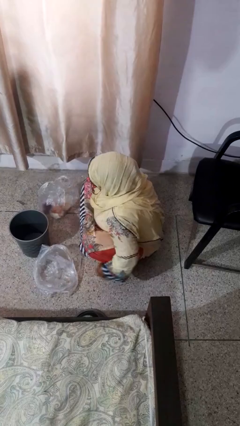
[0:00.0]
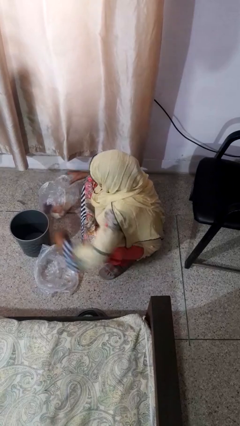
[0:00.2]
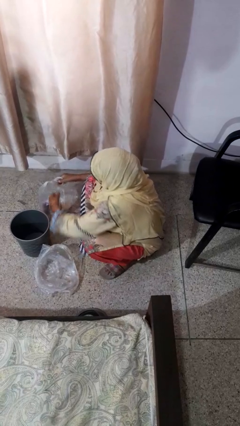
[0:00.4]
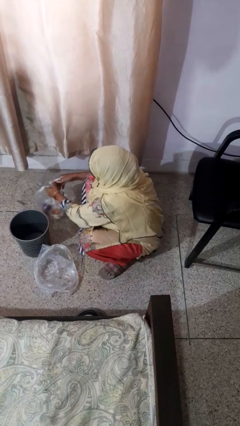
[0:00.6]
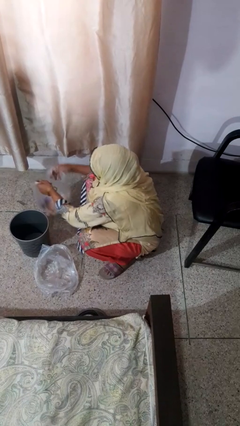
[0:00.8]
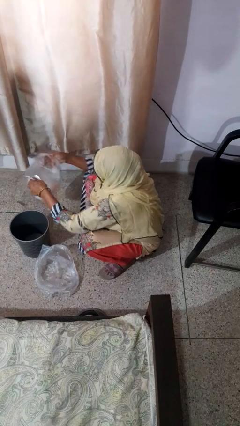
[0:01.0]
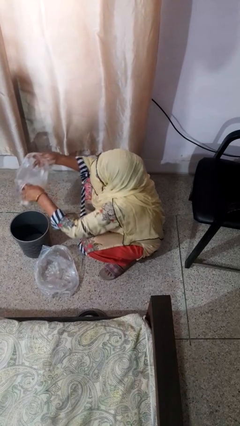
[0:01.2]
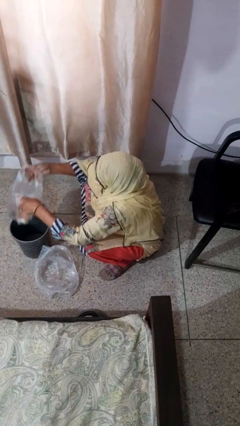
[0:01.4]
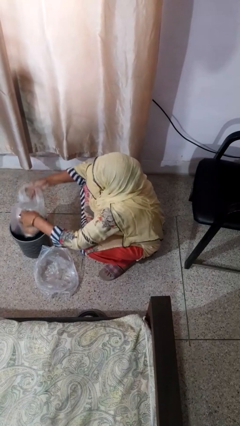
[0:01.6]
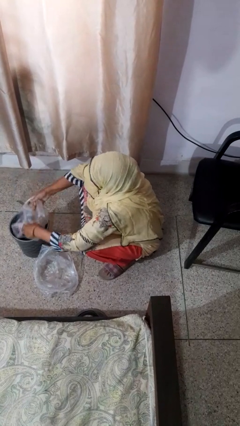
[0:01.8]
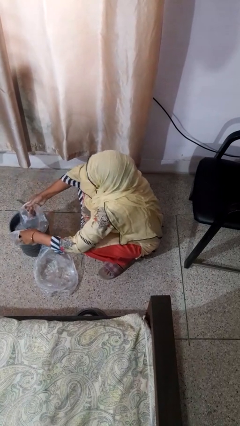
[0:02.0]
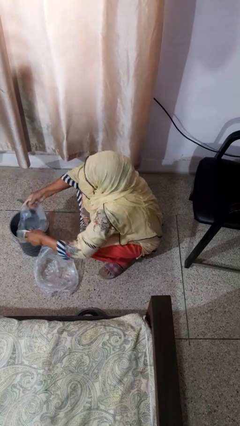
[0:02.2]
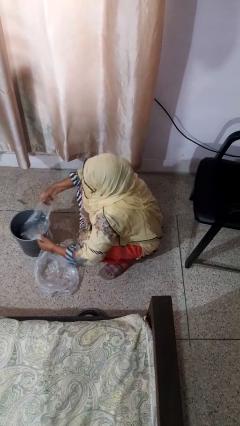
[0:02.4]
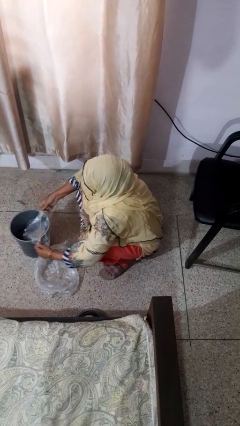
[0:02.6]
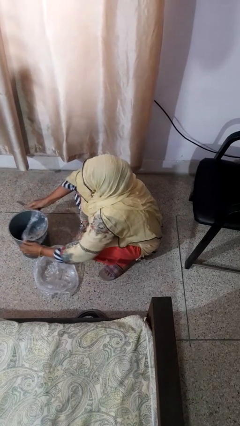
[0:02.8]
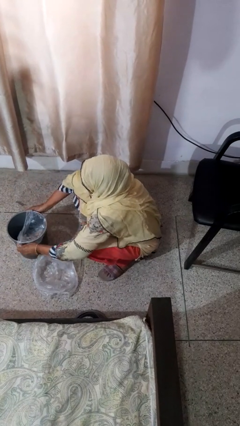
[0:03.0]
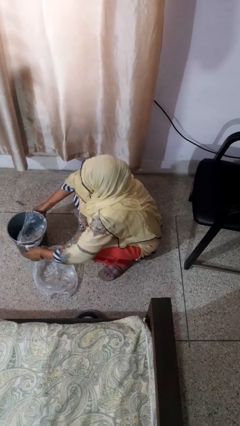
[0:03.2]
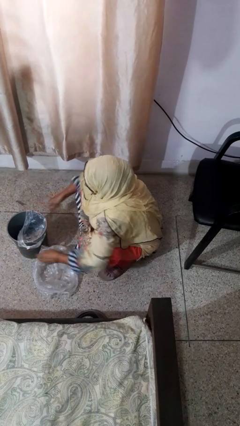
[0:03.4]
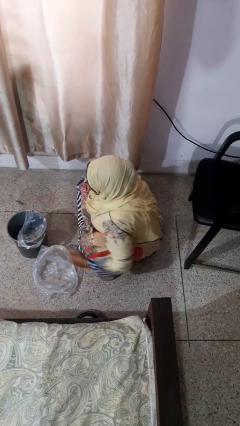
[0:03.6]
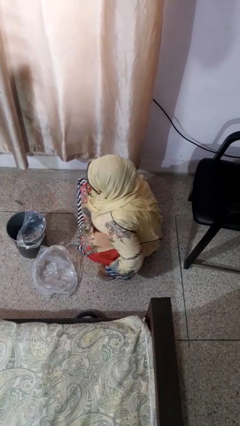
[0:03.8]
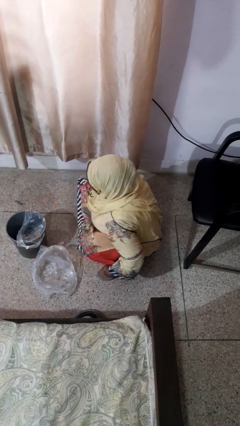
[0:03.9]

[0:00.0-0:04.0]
person inserts trashbag into trashcan

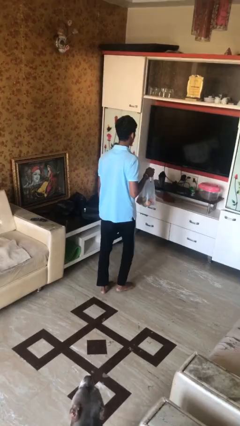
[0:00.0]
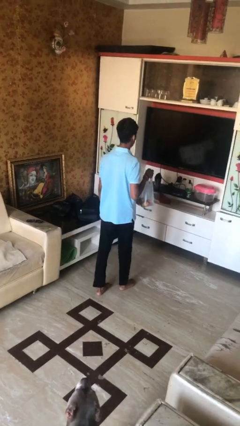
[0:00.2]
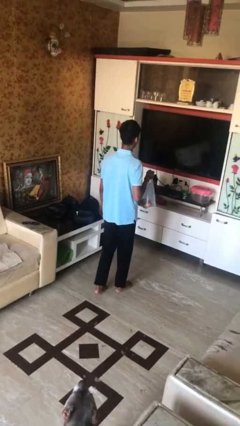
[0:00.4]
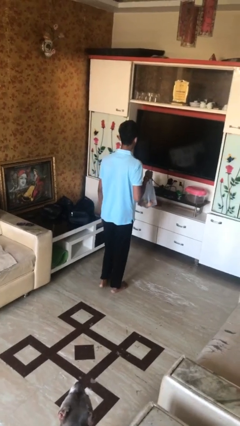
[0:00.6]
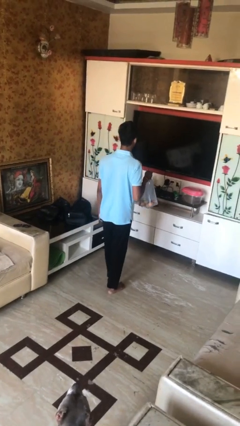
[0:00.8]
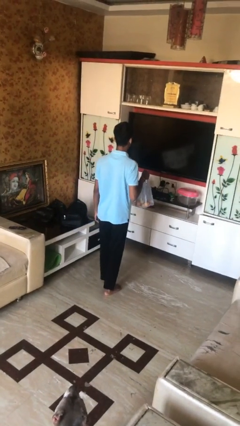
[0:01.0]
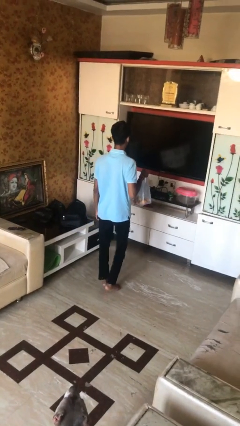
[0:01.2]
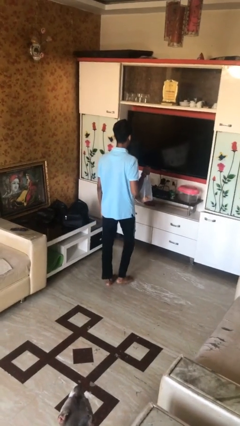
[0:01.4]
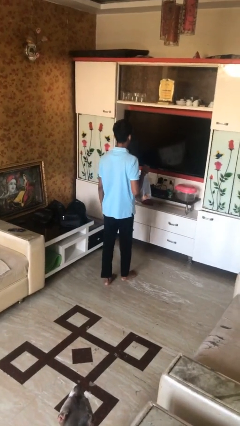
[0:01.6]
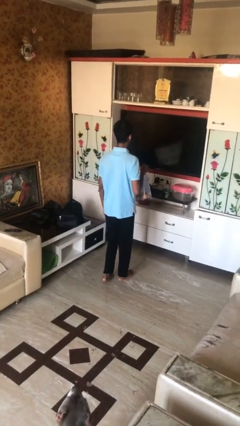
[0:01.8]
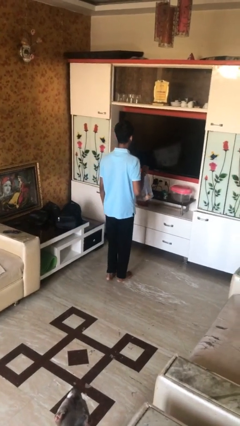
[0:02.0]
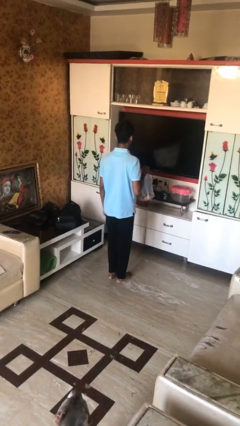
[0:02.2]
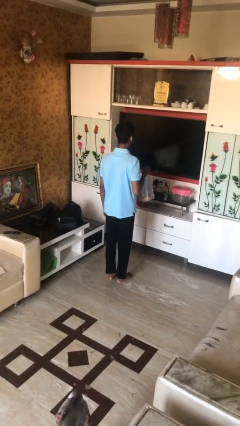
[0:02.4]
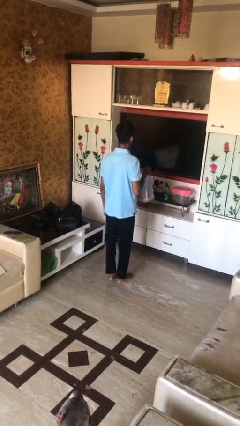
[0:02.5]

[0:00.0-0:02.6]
person carries groceries

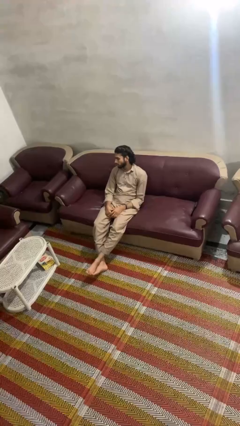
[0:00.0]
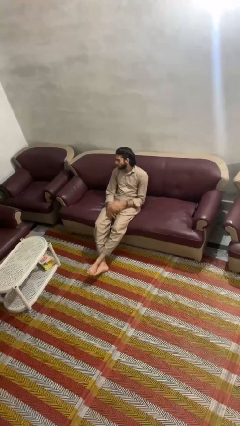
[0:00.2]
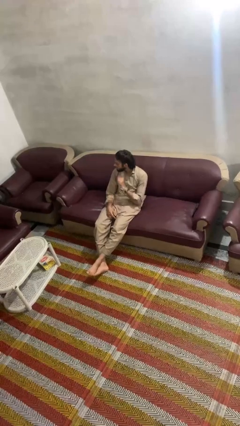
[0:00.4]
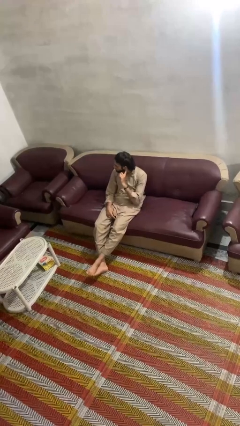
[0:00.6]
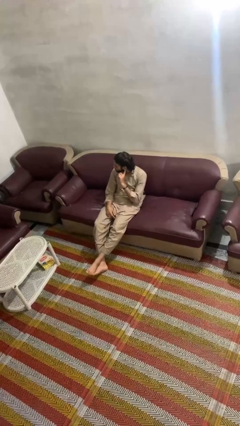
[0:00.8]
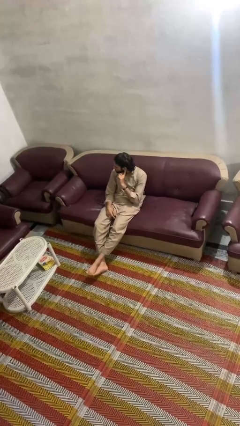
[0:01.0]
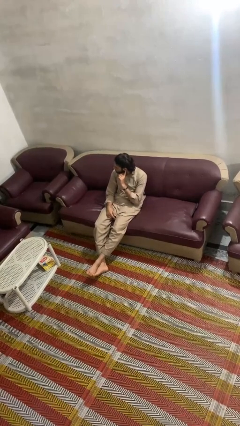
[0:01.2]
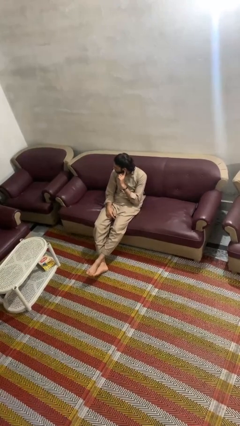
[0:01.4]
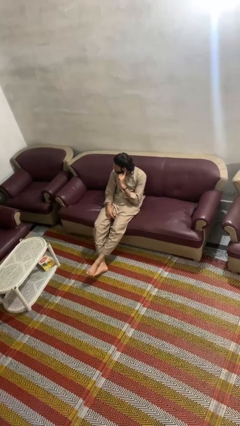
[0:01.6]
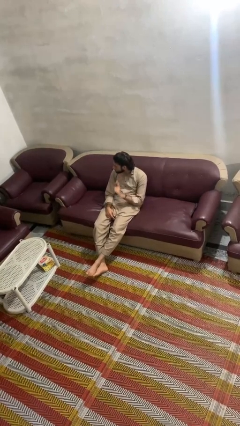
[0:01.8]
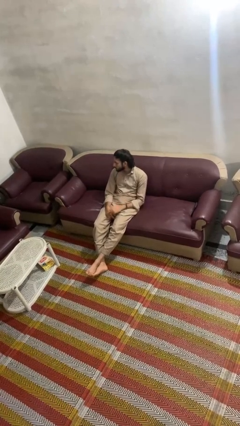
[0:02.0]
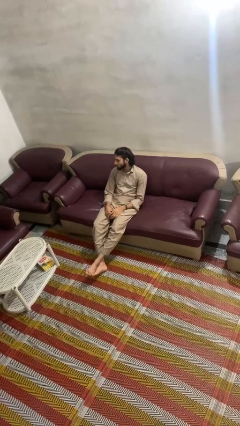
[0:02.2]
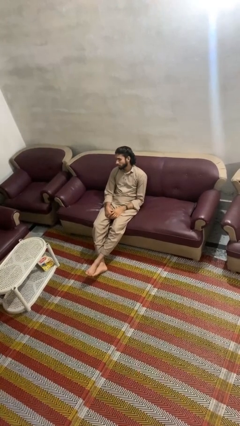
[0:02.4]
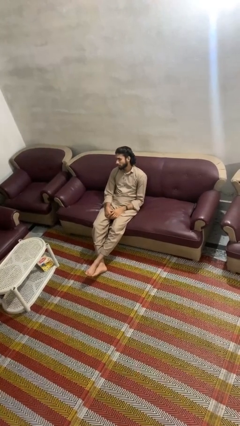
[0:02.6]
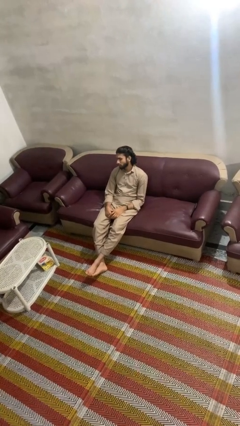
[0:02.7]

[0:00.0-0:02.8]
person gestures listen closely

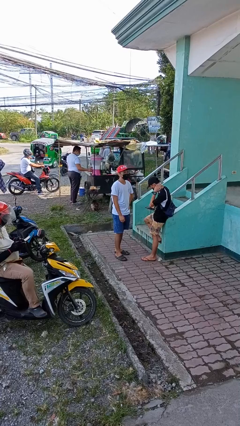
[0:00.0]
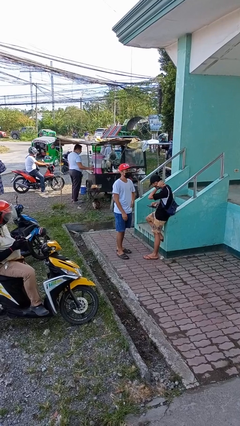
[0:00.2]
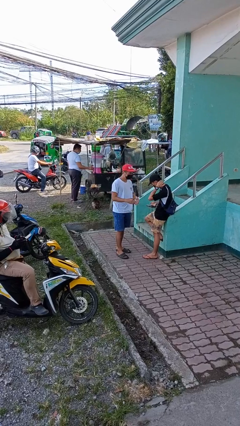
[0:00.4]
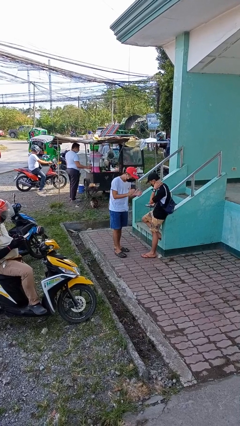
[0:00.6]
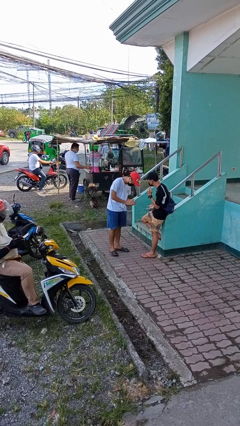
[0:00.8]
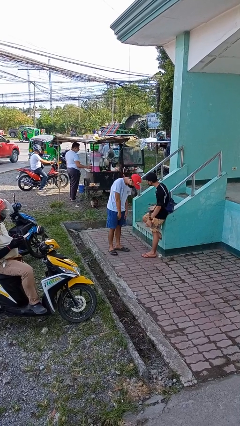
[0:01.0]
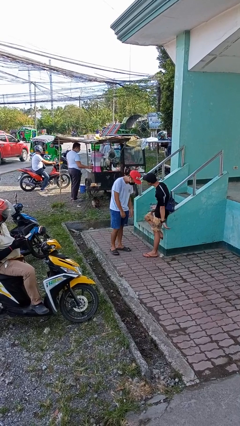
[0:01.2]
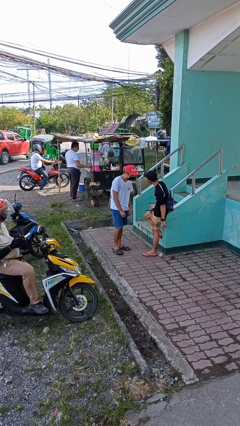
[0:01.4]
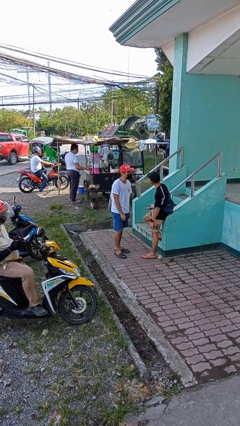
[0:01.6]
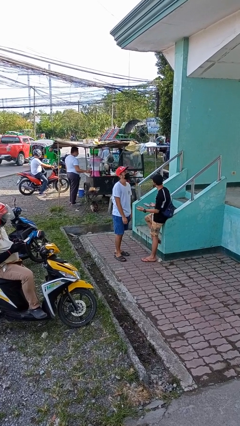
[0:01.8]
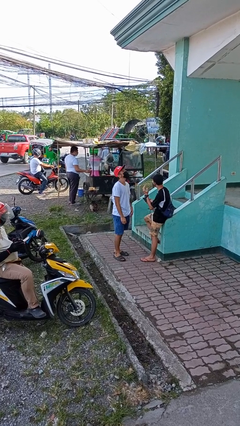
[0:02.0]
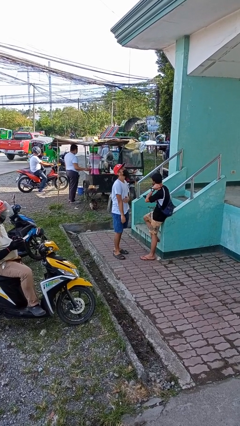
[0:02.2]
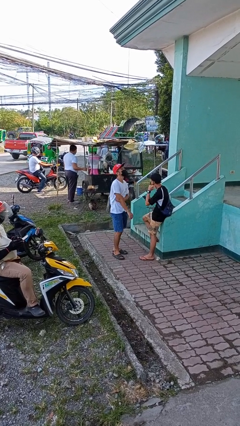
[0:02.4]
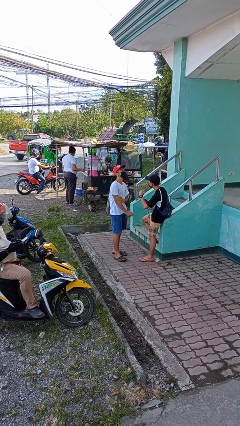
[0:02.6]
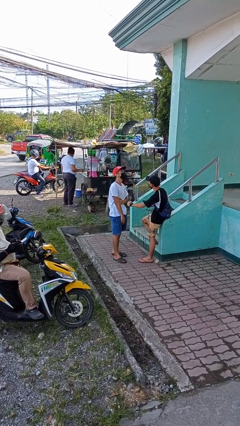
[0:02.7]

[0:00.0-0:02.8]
person laughs with person

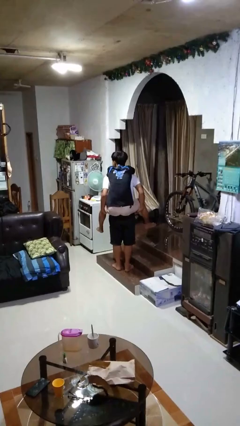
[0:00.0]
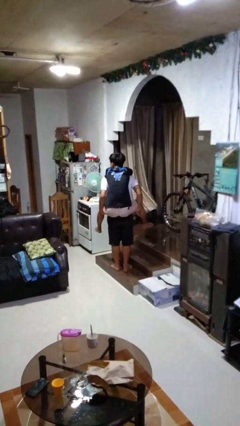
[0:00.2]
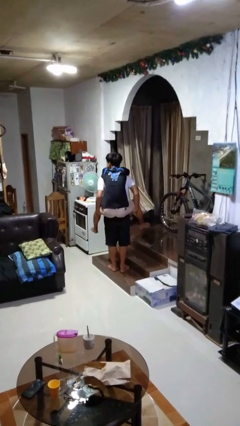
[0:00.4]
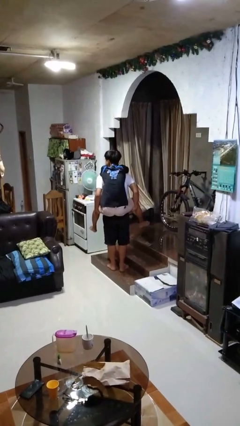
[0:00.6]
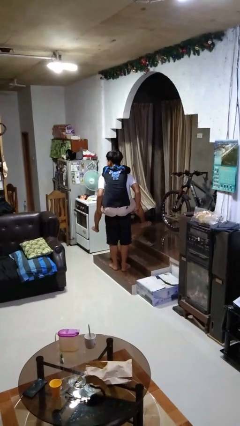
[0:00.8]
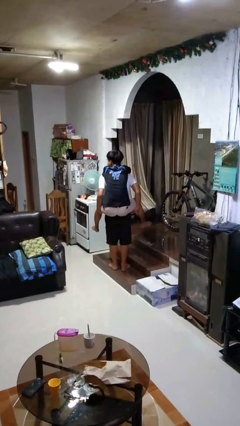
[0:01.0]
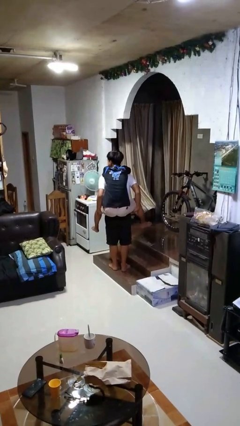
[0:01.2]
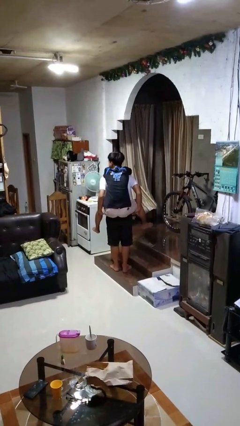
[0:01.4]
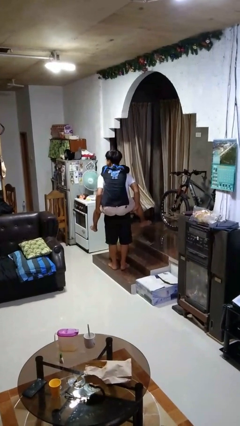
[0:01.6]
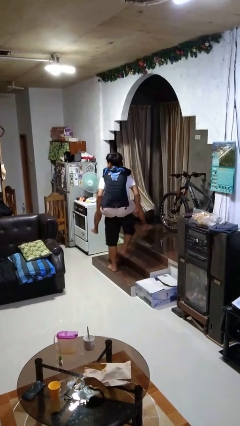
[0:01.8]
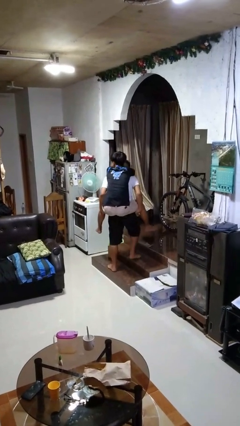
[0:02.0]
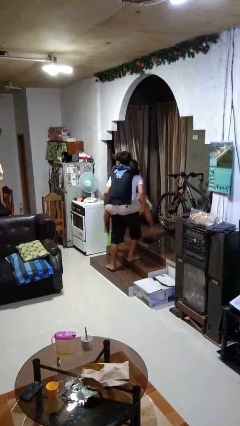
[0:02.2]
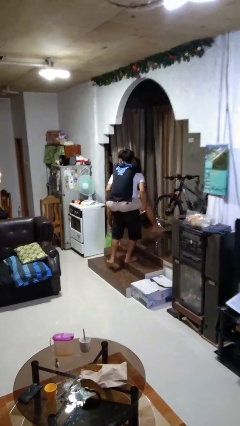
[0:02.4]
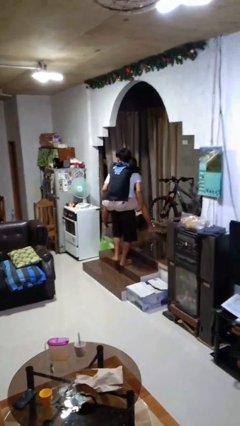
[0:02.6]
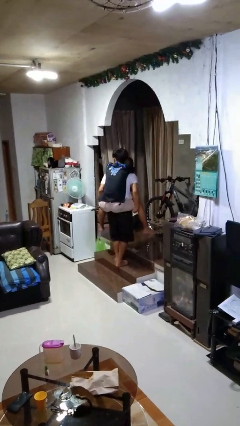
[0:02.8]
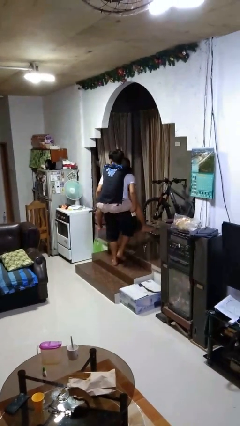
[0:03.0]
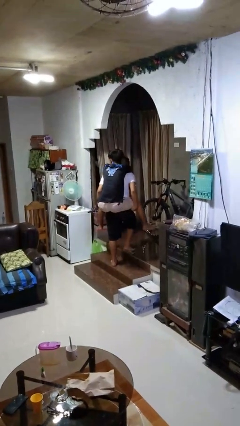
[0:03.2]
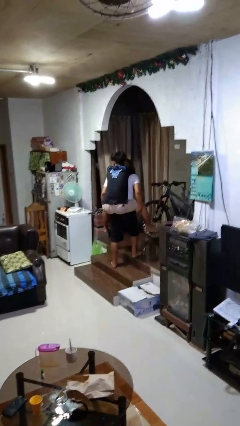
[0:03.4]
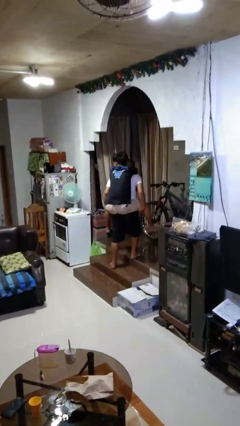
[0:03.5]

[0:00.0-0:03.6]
person carries person on back

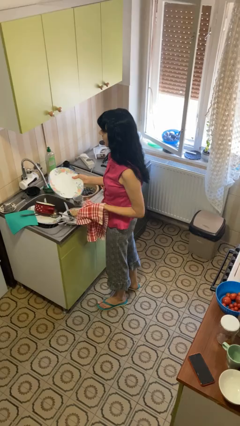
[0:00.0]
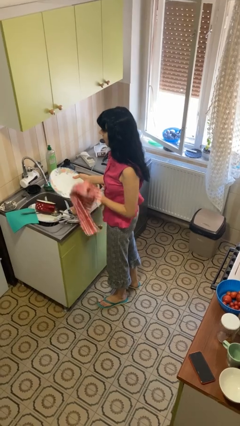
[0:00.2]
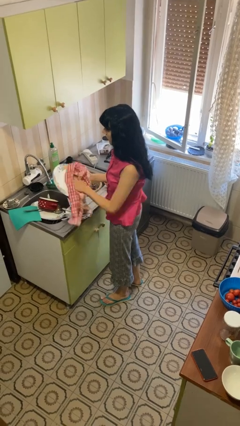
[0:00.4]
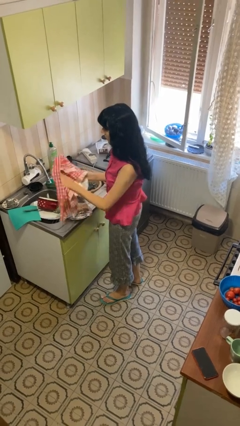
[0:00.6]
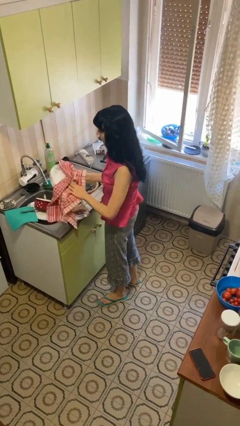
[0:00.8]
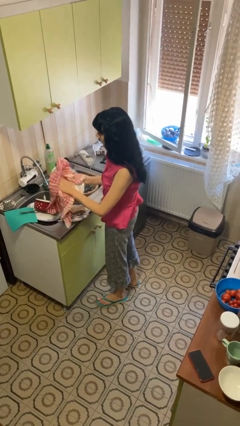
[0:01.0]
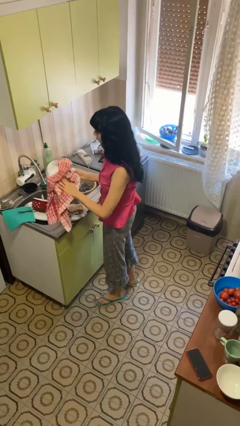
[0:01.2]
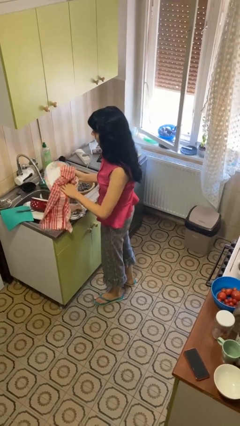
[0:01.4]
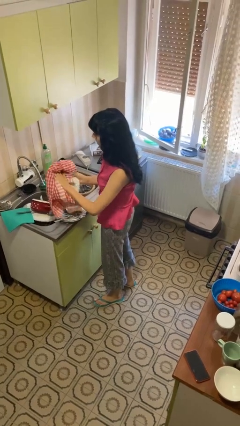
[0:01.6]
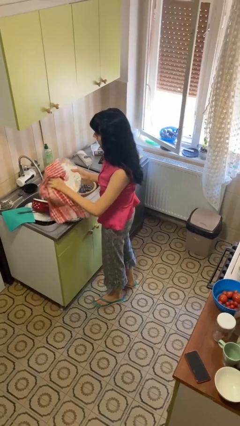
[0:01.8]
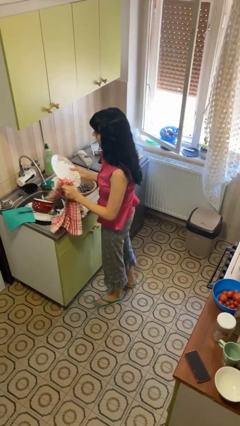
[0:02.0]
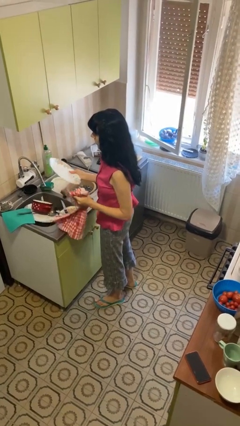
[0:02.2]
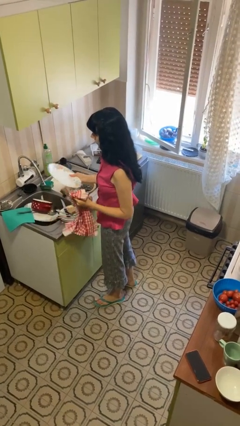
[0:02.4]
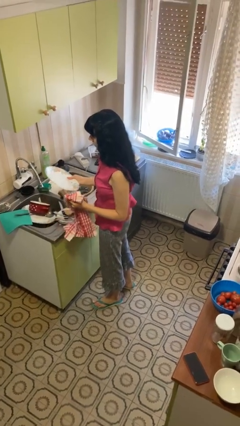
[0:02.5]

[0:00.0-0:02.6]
person dries dish
